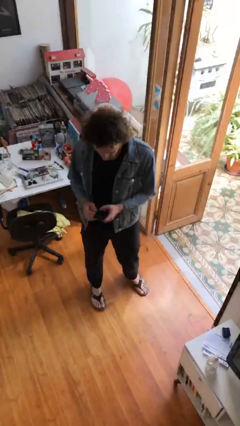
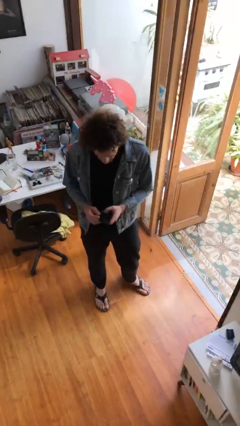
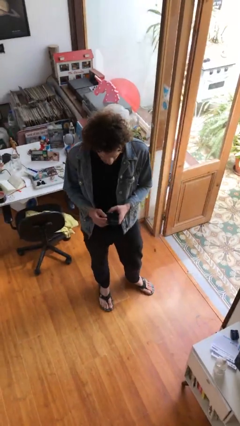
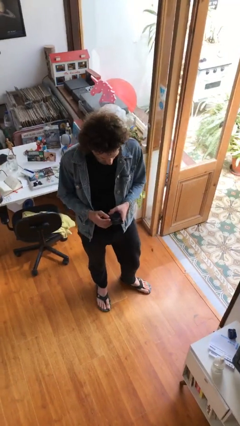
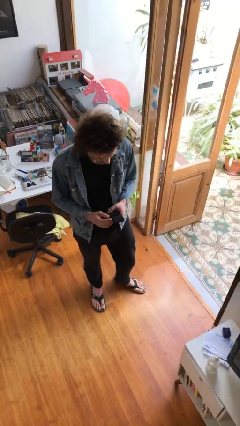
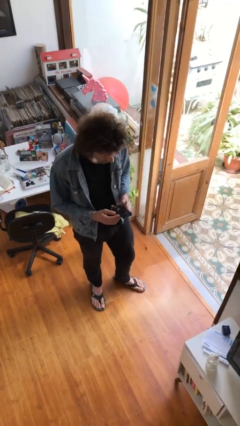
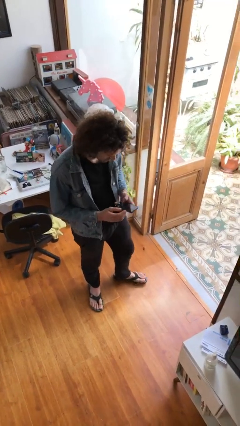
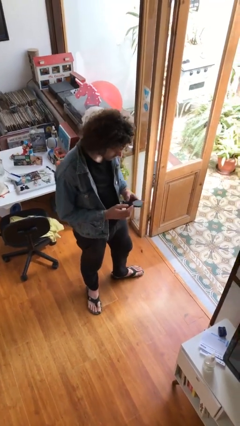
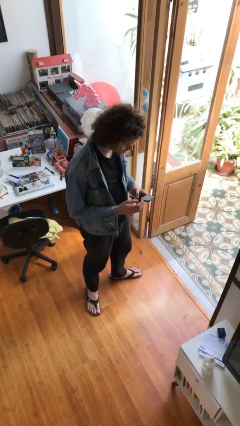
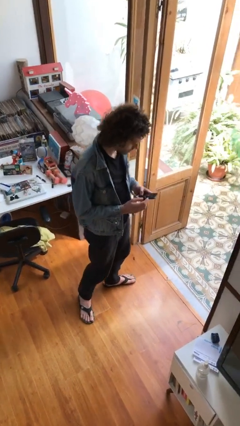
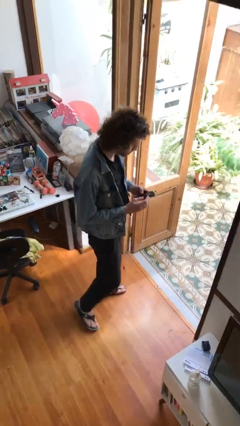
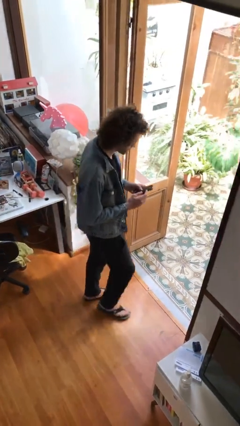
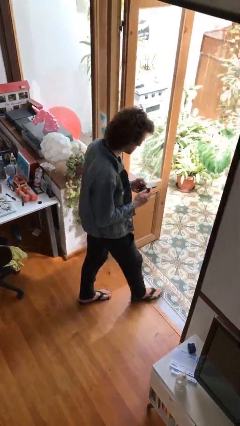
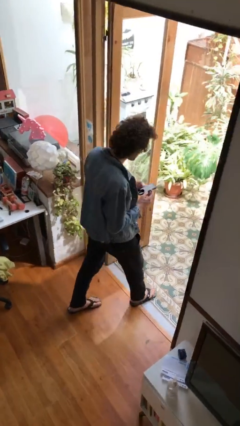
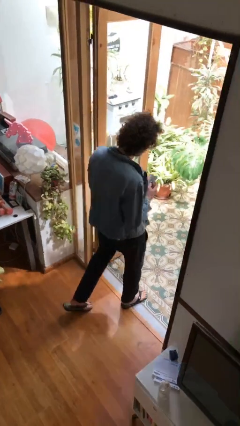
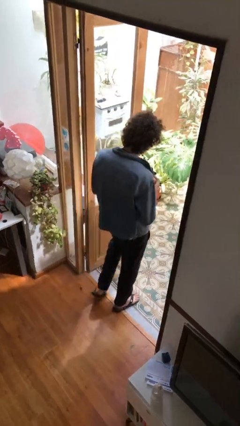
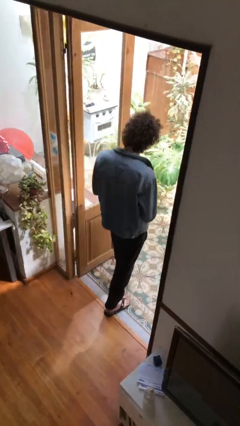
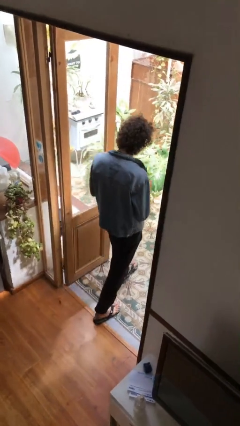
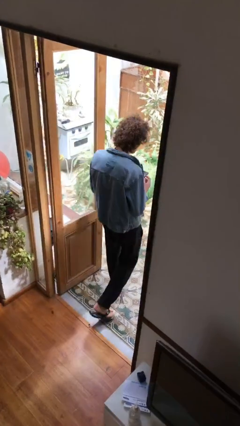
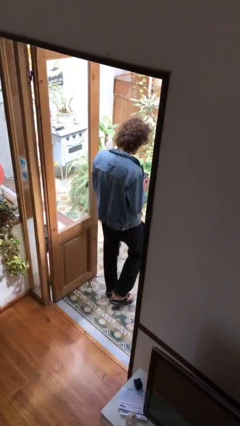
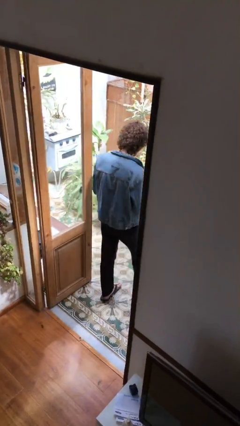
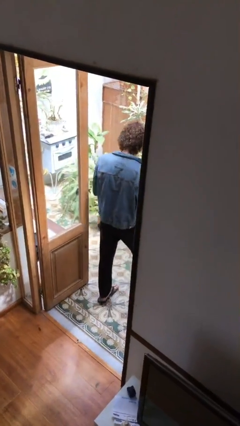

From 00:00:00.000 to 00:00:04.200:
person exits scene through structure

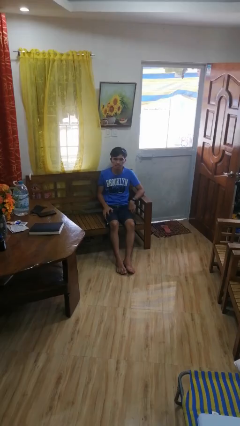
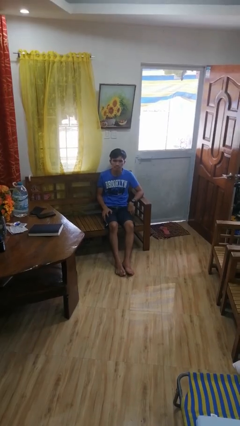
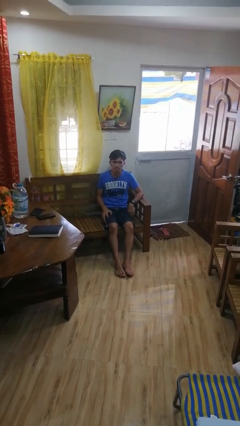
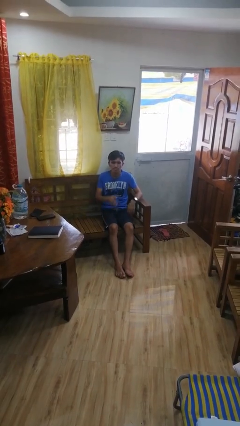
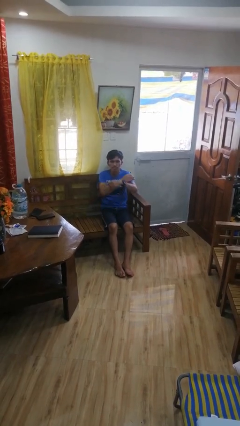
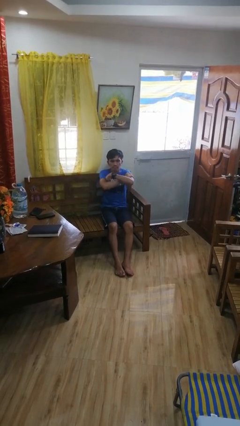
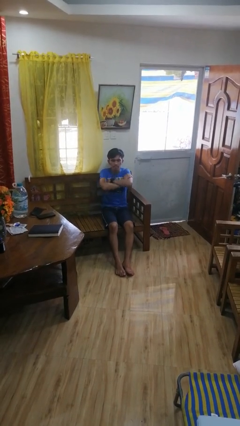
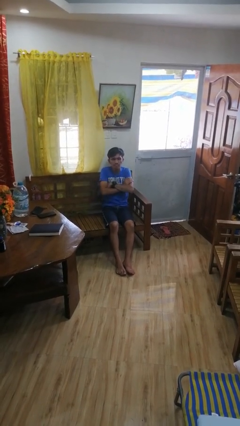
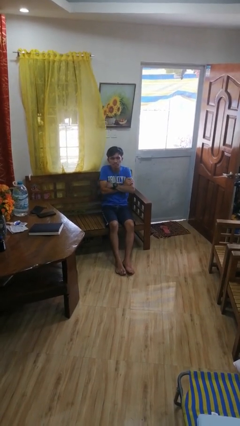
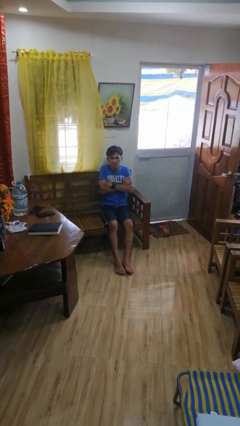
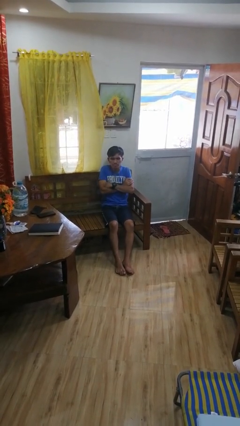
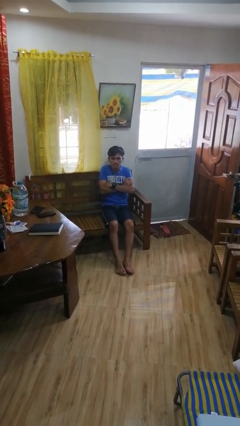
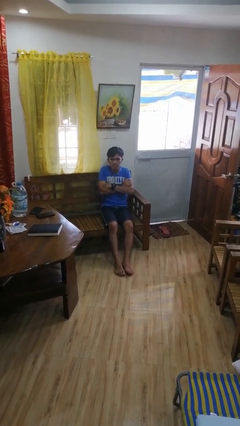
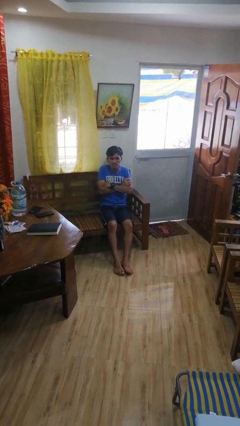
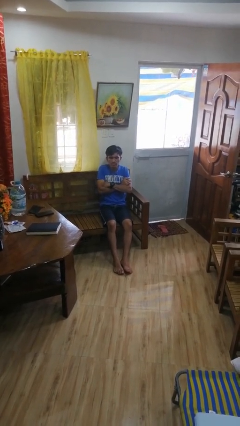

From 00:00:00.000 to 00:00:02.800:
person crosses arms

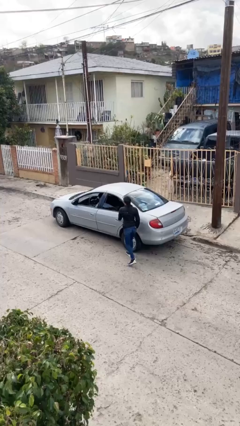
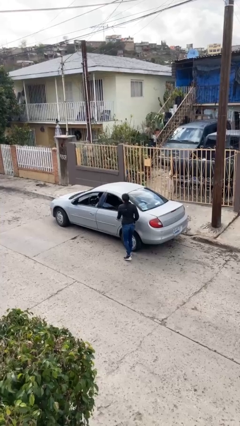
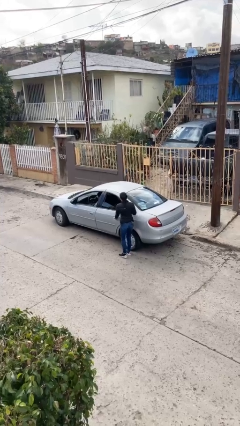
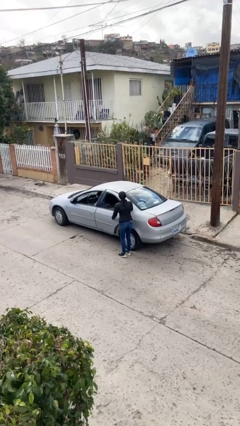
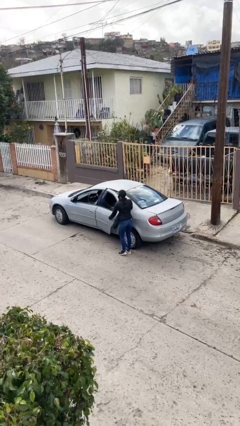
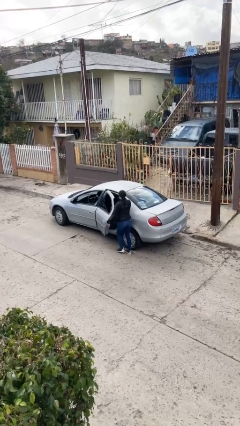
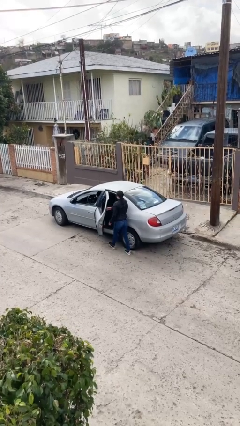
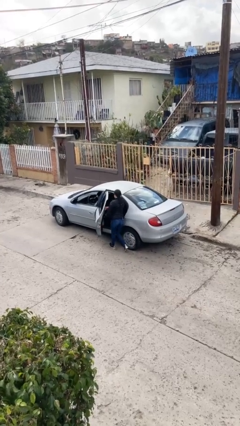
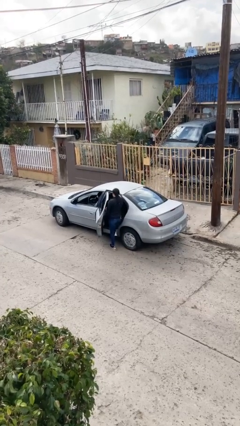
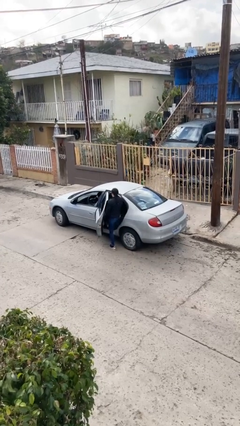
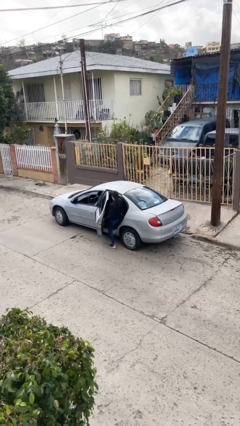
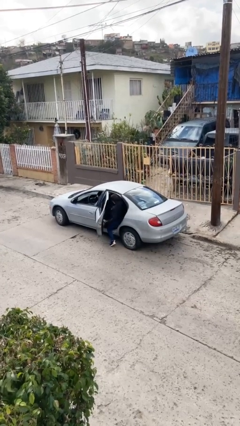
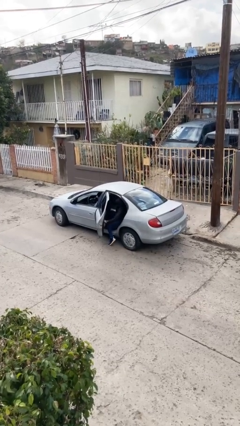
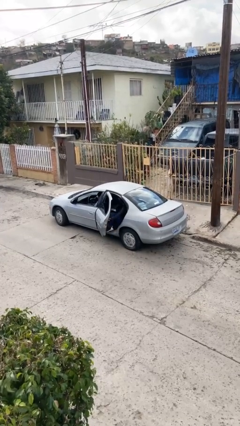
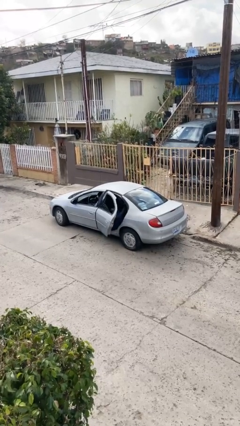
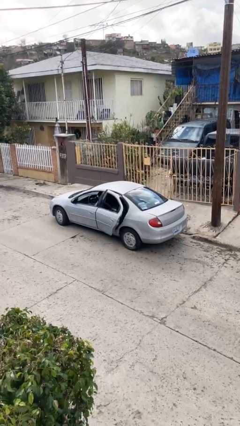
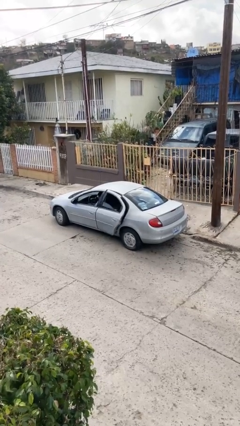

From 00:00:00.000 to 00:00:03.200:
car picks up person

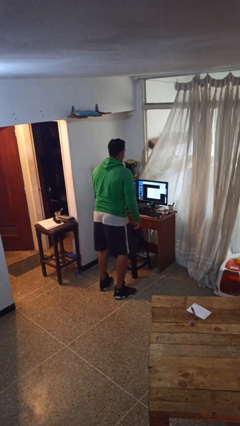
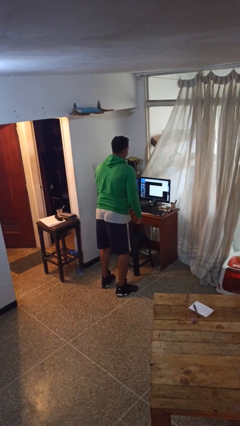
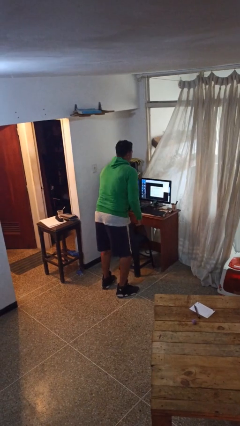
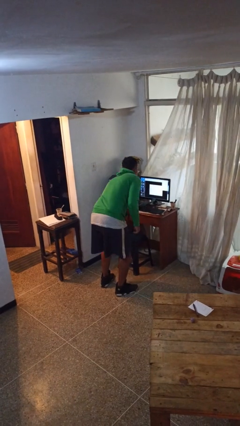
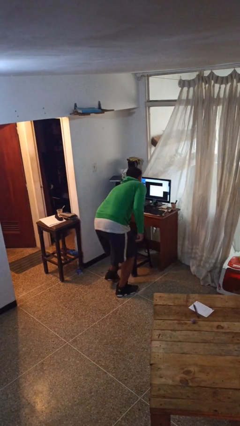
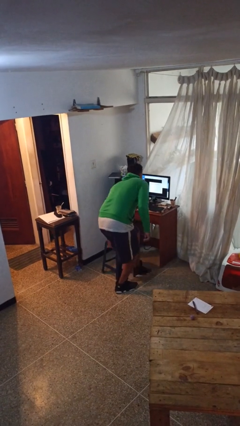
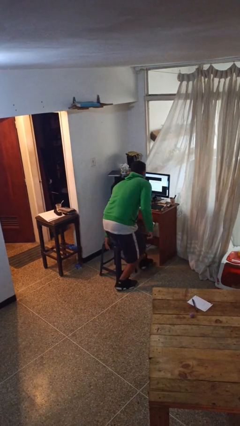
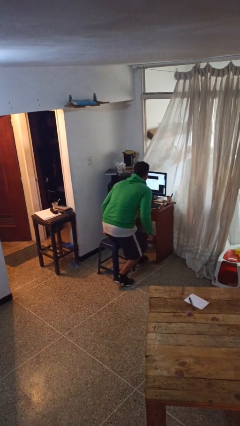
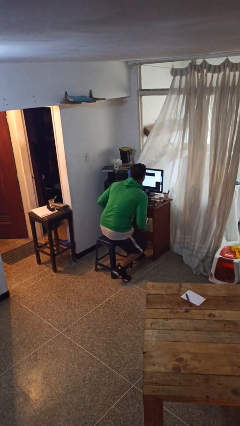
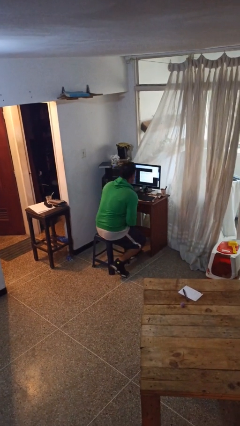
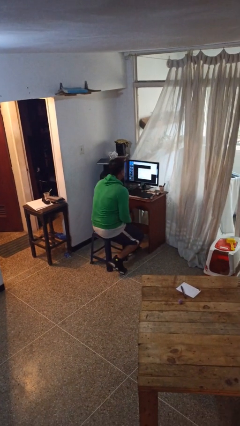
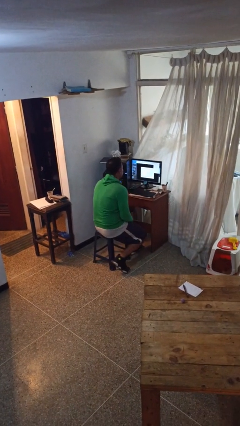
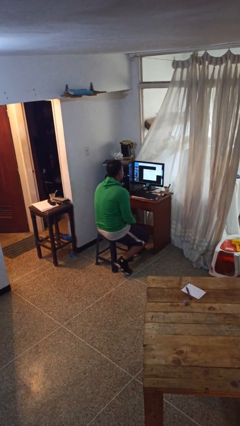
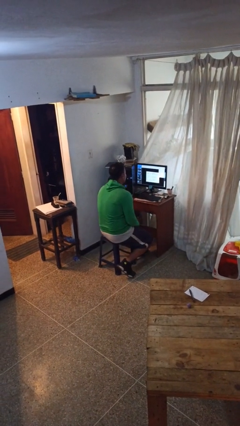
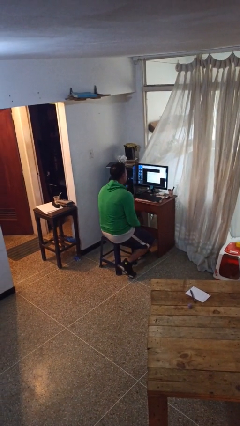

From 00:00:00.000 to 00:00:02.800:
person sits down

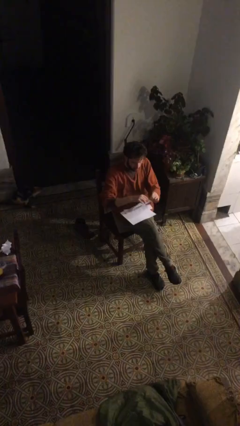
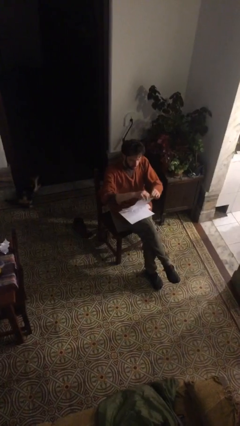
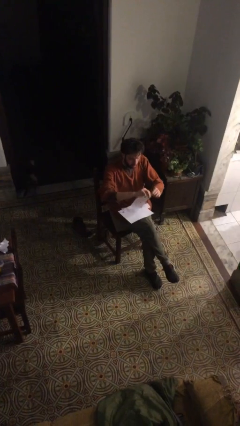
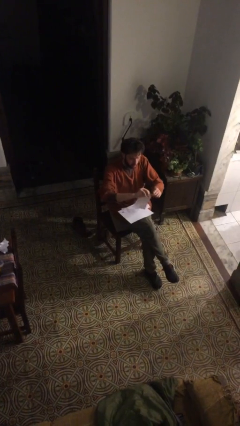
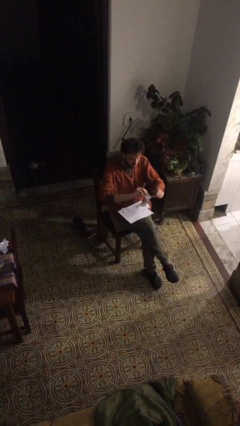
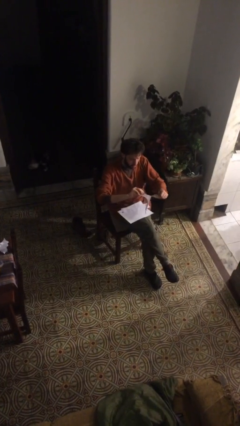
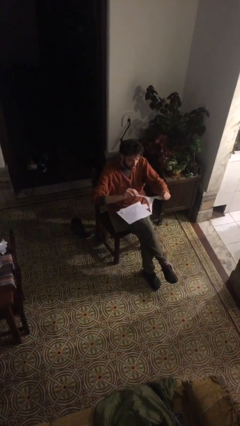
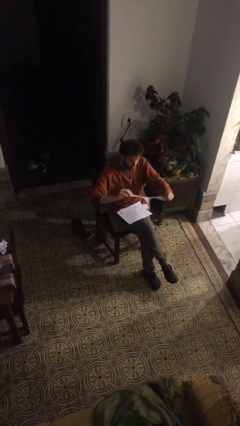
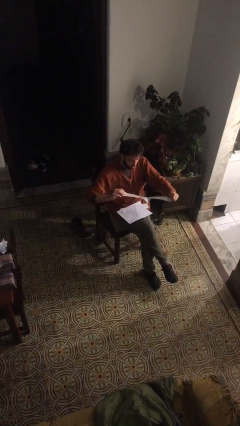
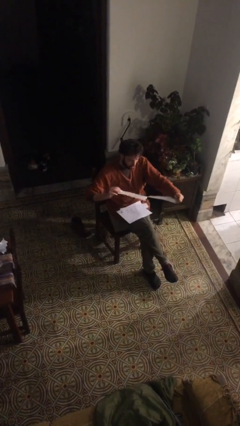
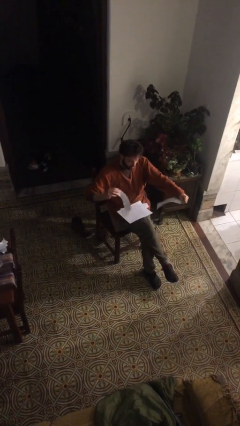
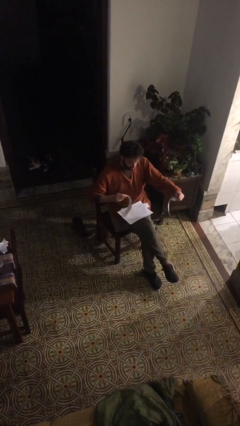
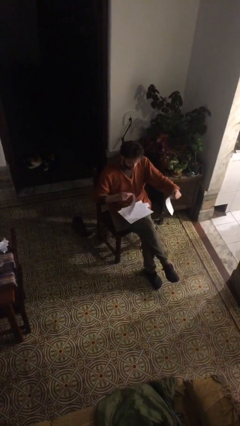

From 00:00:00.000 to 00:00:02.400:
person tears paper

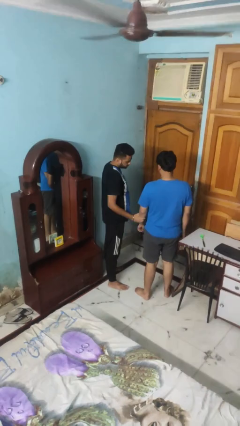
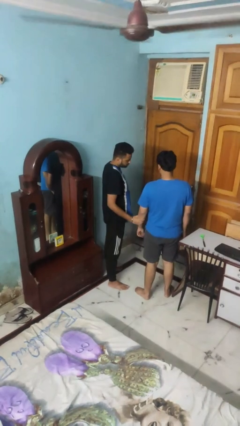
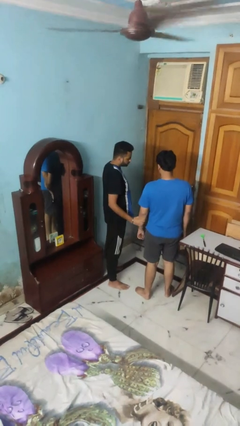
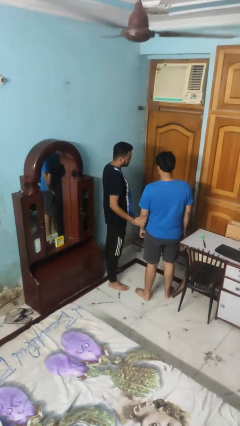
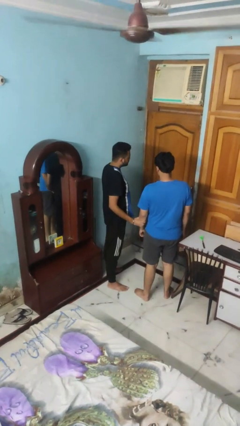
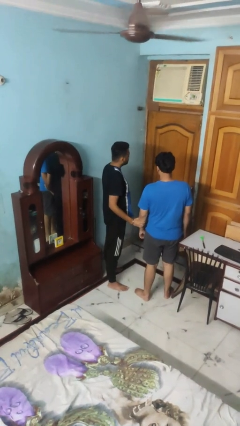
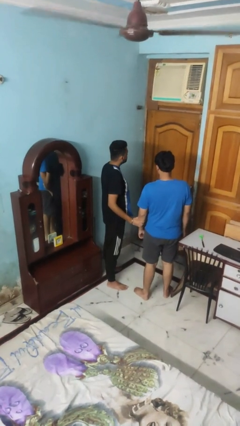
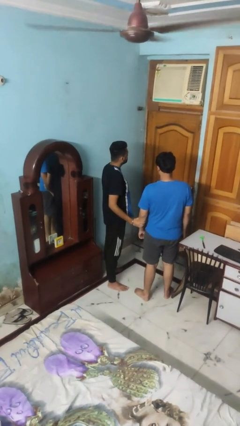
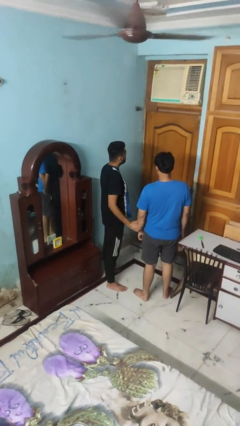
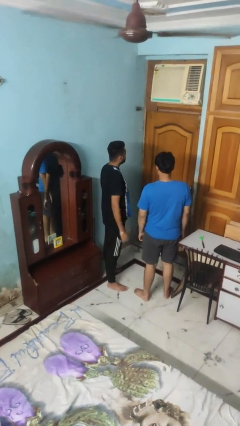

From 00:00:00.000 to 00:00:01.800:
person grabs person by forearm

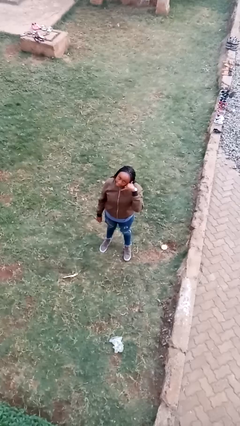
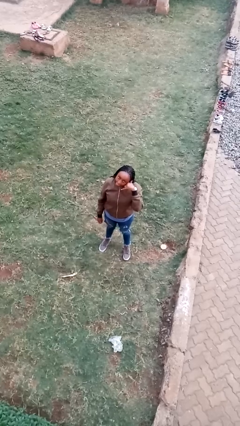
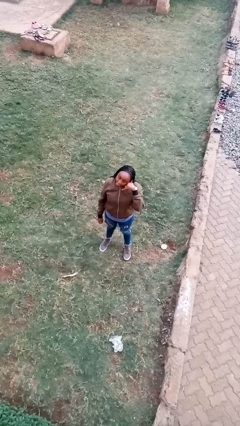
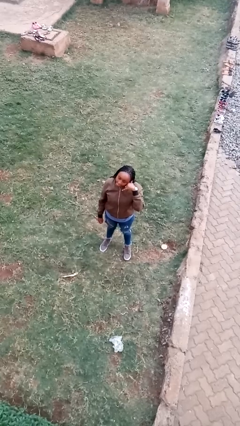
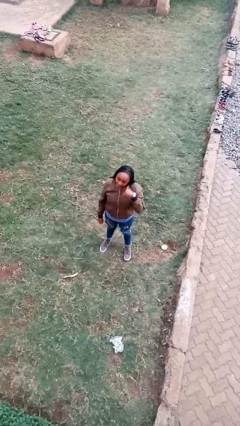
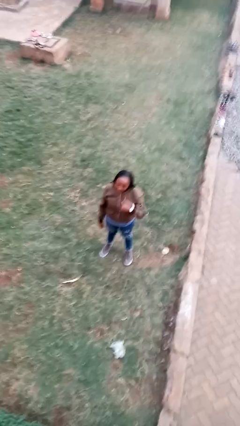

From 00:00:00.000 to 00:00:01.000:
person gestures call me
